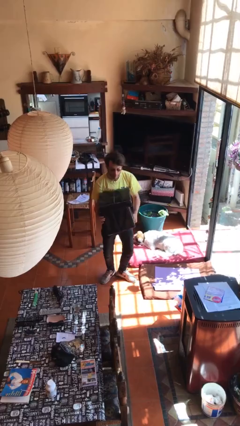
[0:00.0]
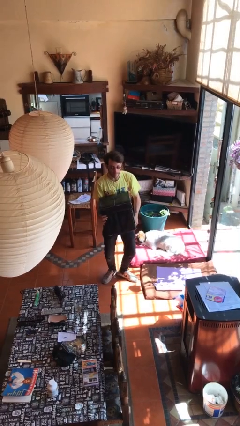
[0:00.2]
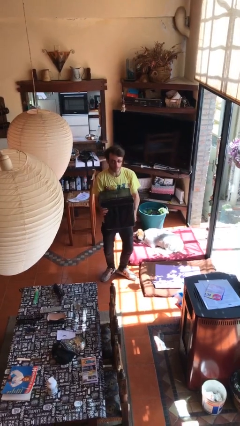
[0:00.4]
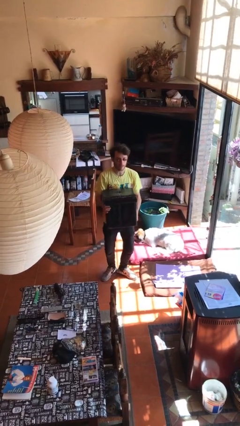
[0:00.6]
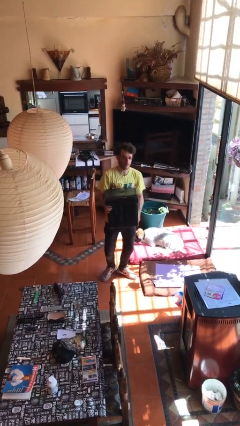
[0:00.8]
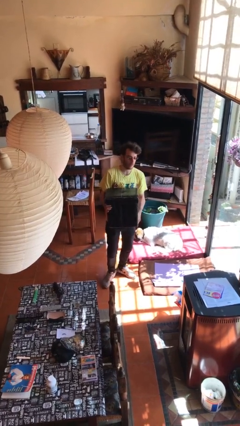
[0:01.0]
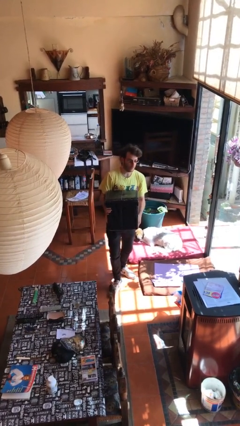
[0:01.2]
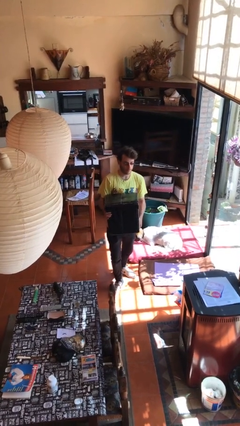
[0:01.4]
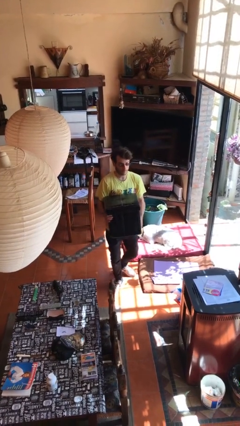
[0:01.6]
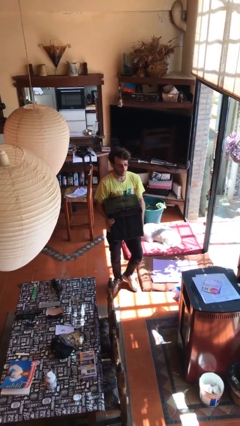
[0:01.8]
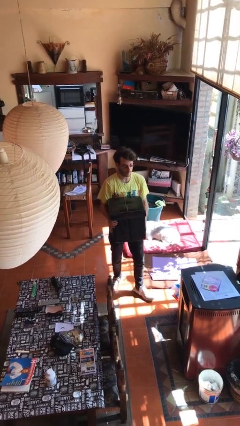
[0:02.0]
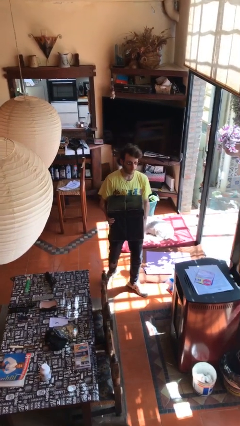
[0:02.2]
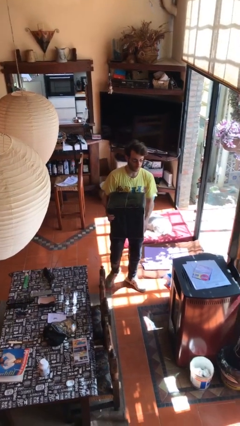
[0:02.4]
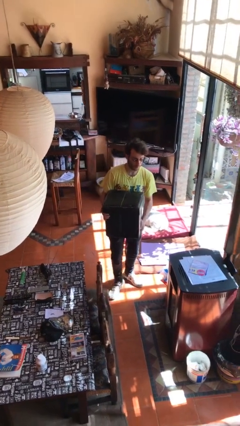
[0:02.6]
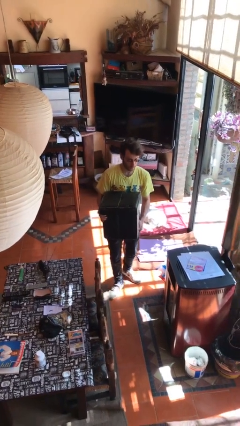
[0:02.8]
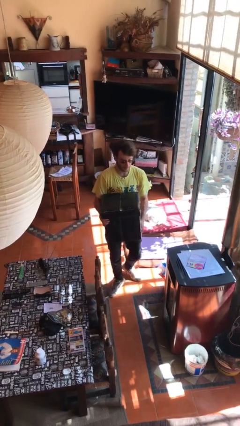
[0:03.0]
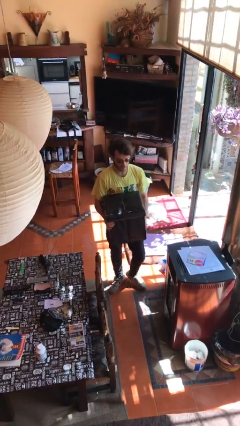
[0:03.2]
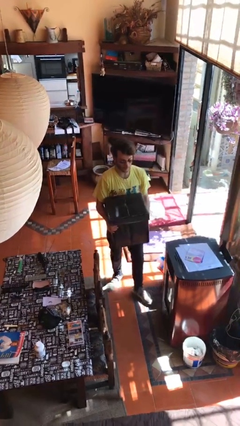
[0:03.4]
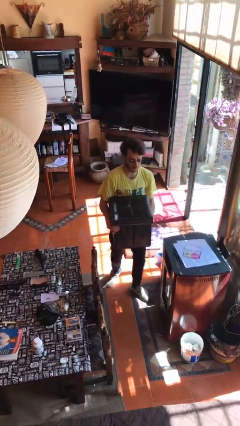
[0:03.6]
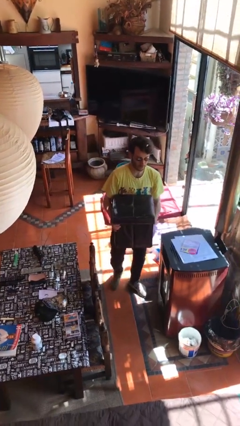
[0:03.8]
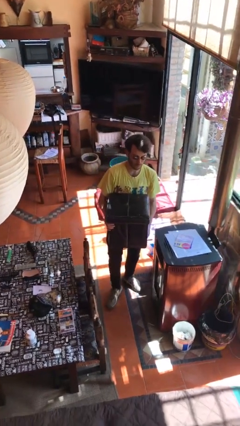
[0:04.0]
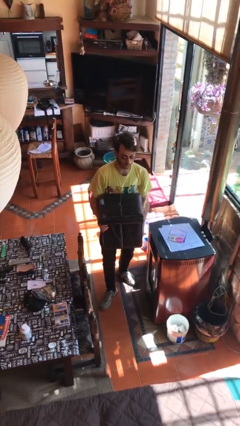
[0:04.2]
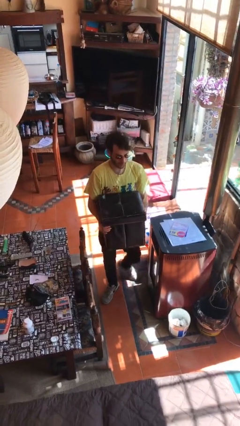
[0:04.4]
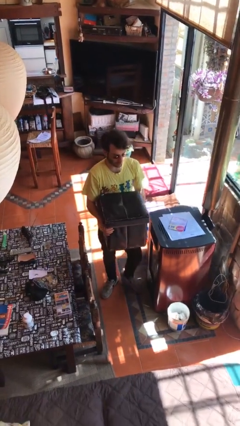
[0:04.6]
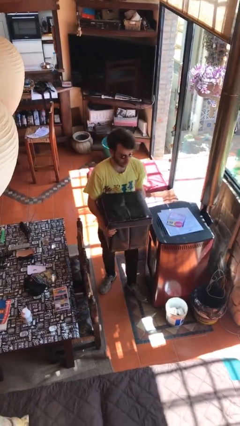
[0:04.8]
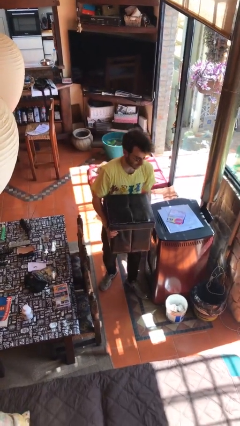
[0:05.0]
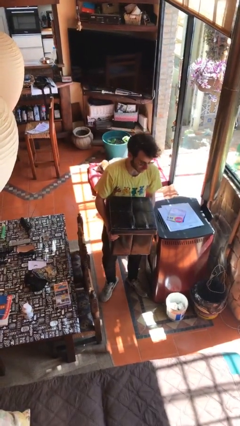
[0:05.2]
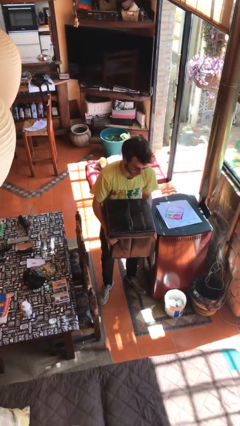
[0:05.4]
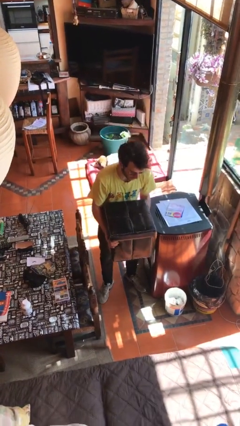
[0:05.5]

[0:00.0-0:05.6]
person carries heavy object

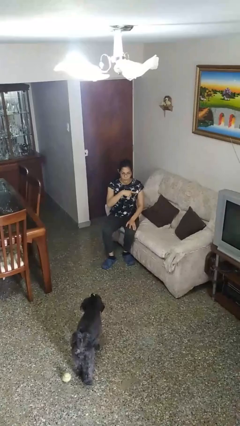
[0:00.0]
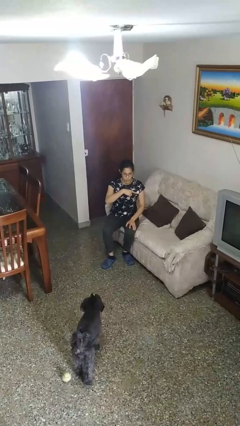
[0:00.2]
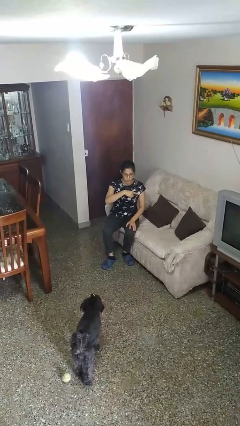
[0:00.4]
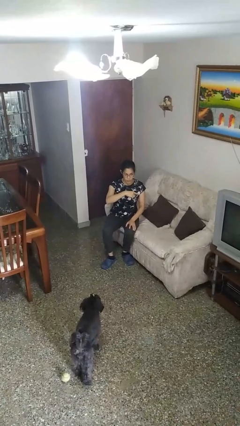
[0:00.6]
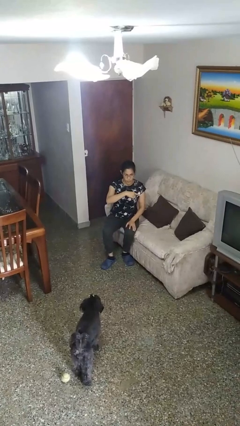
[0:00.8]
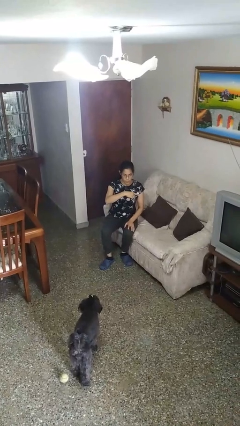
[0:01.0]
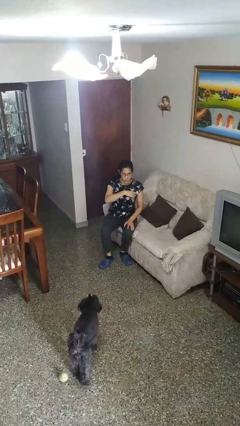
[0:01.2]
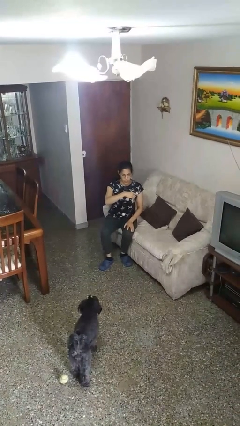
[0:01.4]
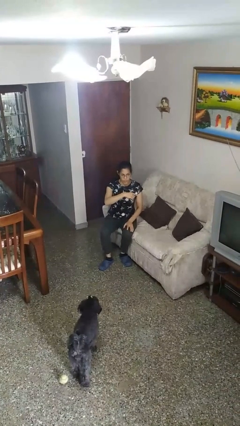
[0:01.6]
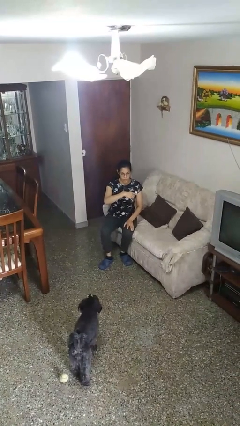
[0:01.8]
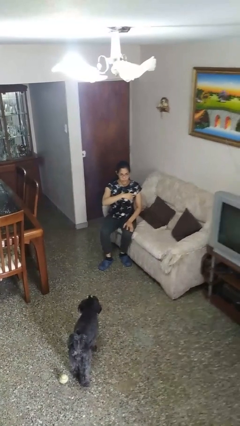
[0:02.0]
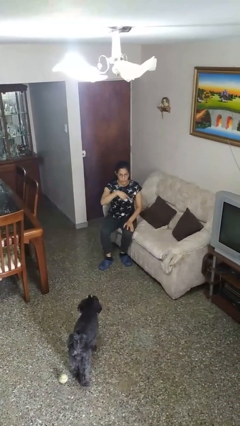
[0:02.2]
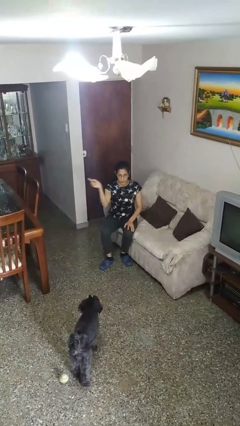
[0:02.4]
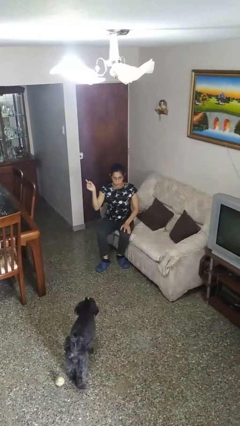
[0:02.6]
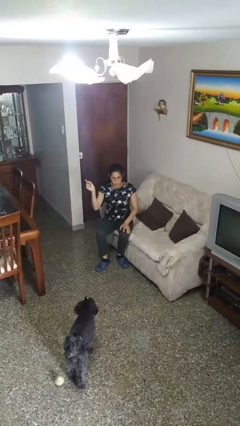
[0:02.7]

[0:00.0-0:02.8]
person gestures swipe left

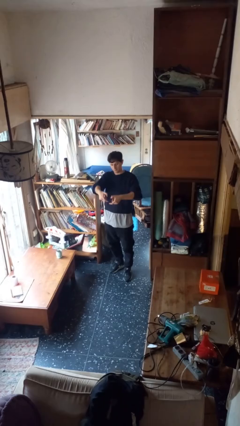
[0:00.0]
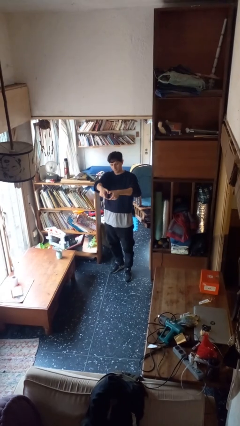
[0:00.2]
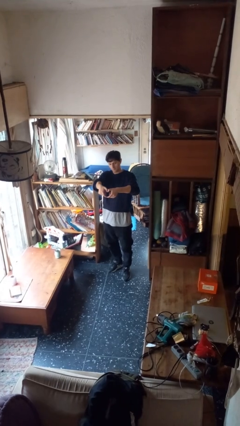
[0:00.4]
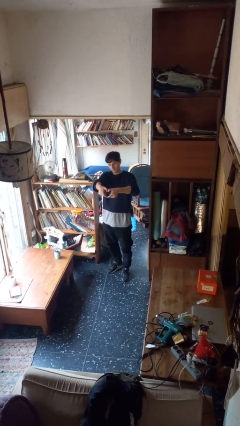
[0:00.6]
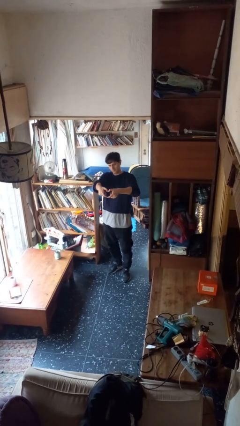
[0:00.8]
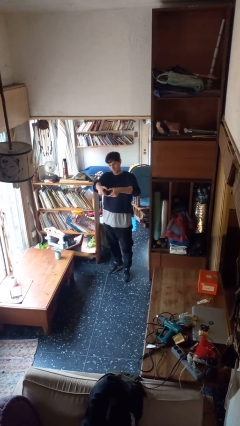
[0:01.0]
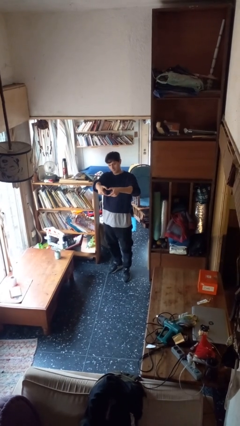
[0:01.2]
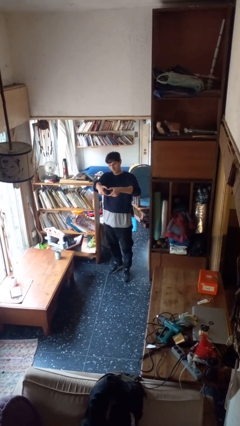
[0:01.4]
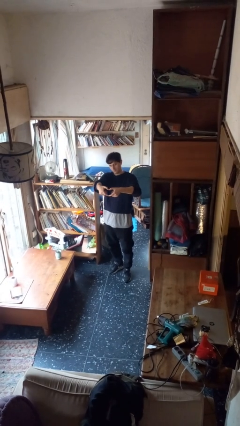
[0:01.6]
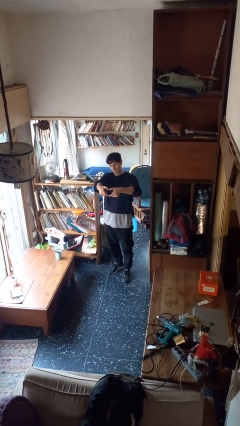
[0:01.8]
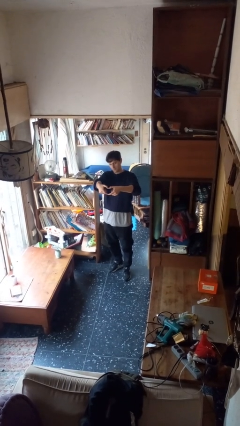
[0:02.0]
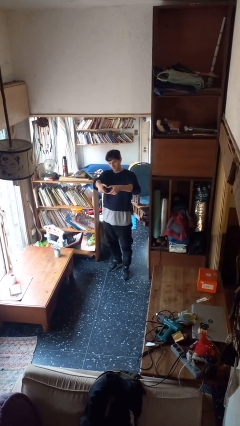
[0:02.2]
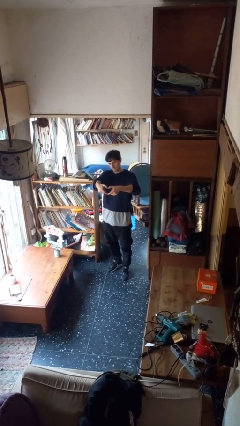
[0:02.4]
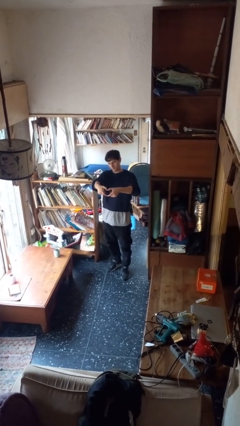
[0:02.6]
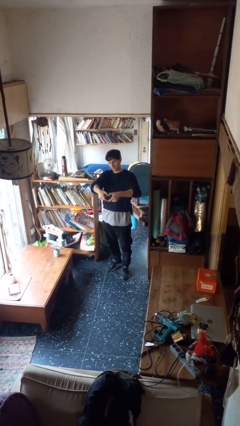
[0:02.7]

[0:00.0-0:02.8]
person gestures heart

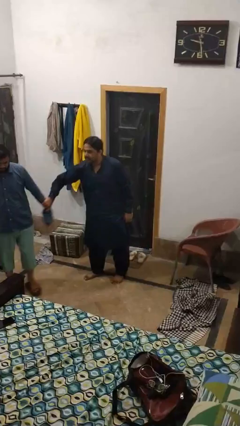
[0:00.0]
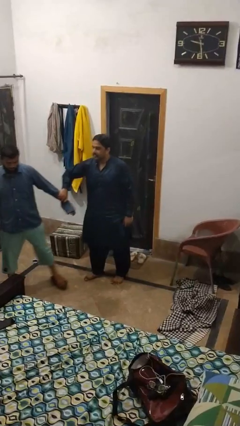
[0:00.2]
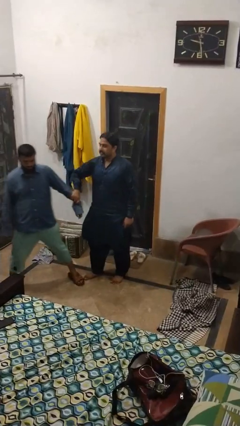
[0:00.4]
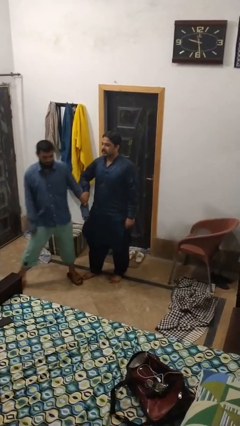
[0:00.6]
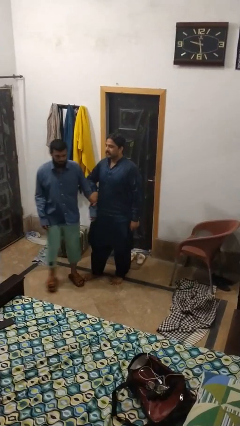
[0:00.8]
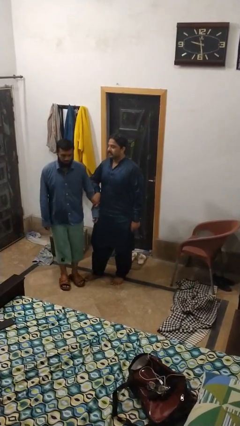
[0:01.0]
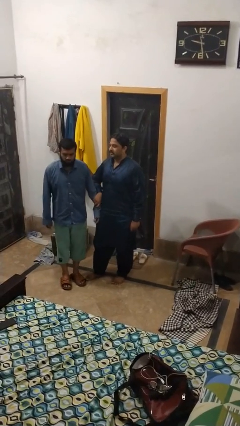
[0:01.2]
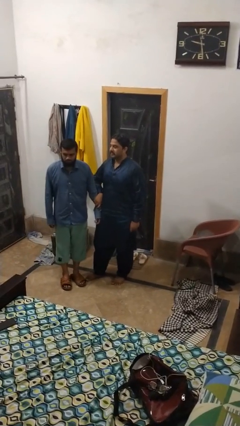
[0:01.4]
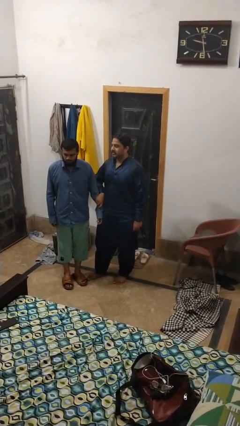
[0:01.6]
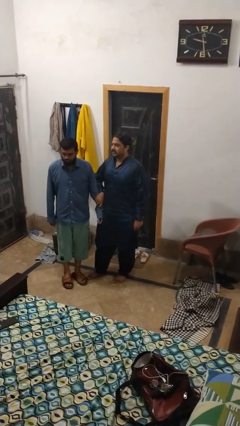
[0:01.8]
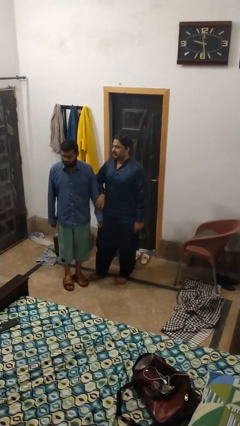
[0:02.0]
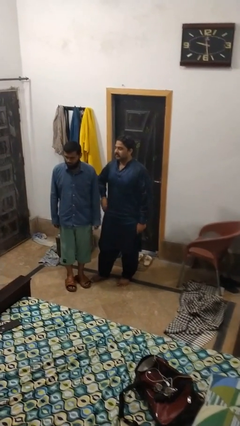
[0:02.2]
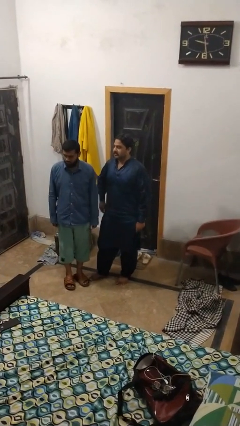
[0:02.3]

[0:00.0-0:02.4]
person grabs person by forearm

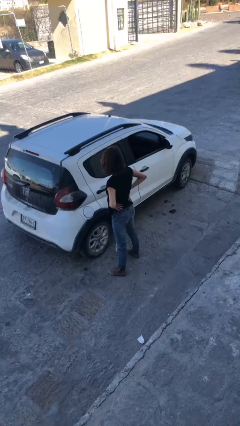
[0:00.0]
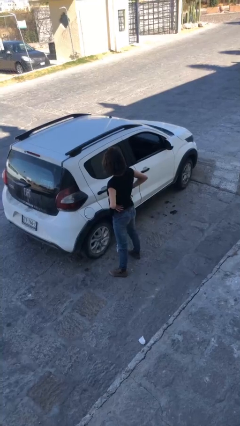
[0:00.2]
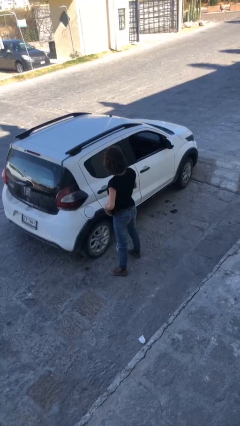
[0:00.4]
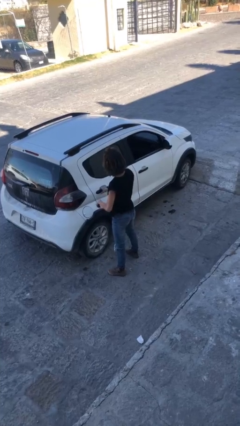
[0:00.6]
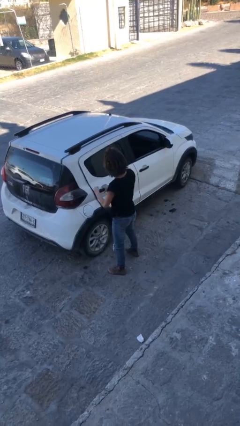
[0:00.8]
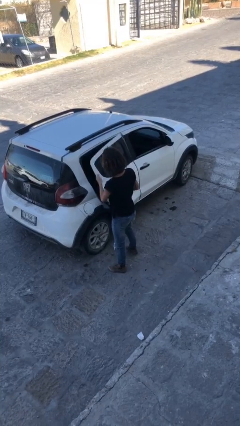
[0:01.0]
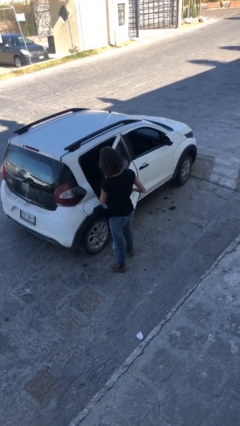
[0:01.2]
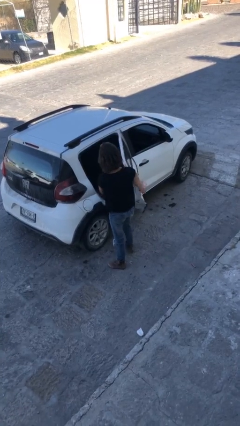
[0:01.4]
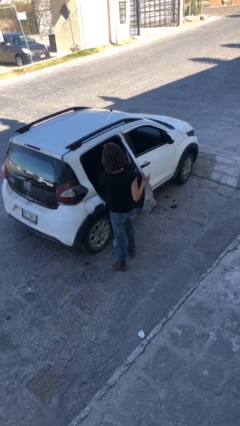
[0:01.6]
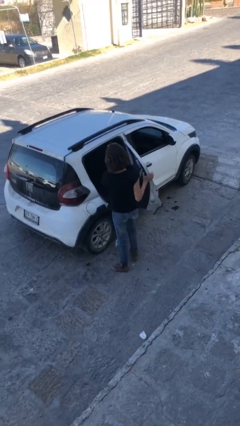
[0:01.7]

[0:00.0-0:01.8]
person opens car door

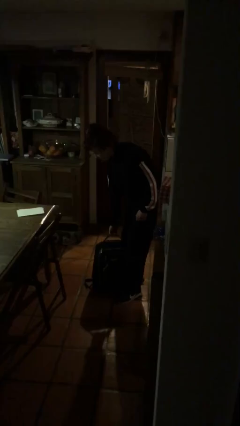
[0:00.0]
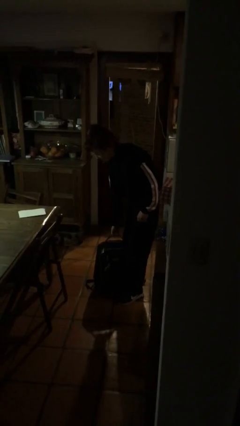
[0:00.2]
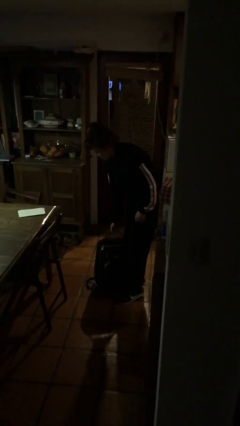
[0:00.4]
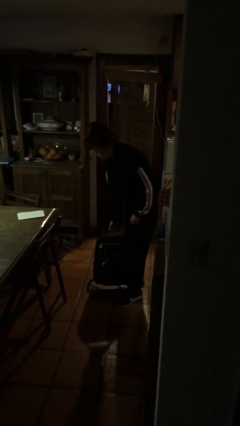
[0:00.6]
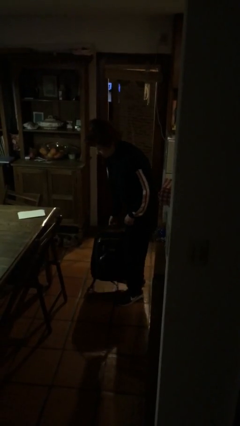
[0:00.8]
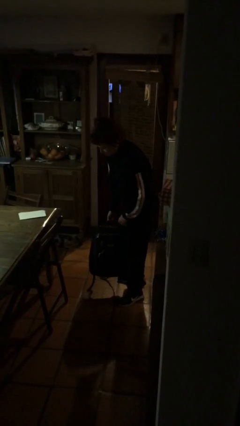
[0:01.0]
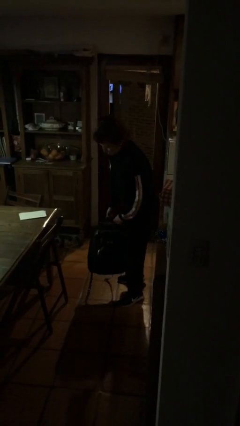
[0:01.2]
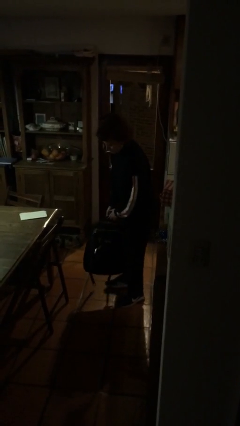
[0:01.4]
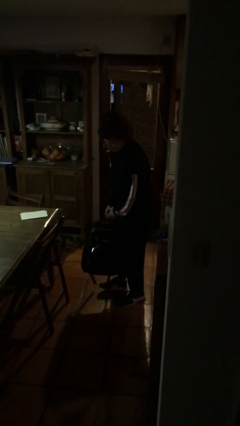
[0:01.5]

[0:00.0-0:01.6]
person picks up object from floor

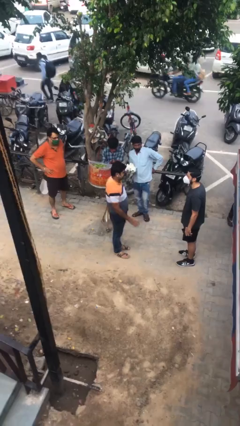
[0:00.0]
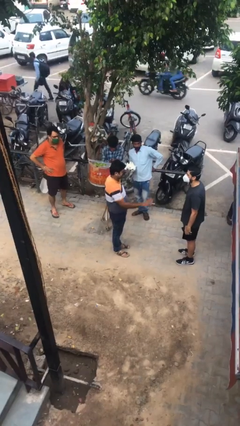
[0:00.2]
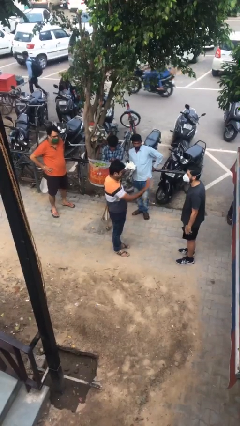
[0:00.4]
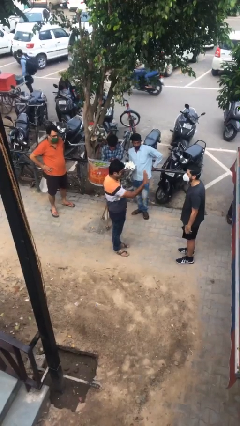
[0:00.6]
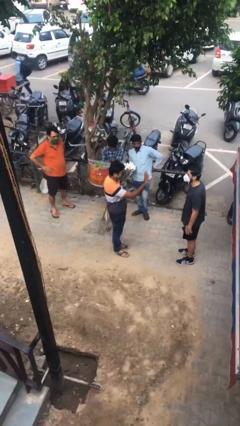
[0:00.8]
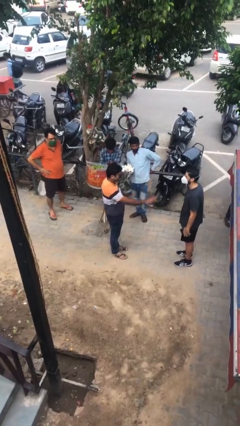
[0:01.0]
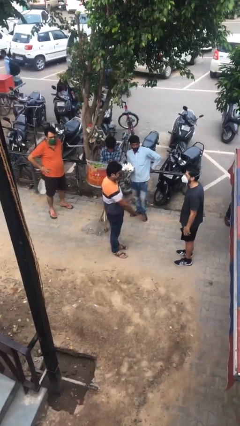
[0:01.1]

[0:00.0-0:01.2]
person waves at person
